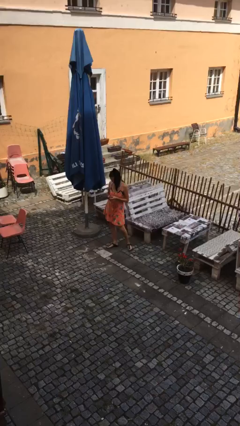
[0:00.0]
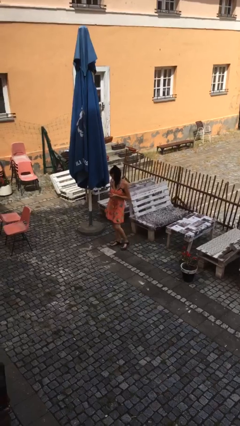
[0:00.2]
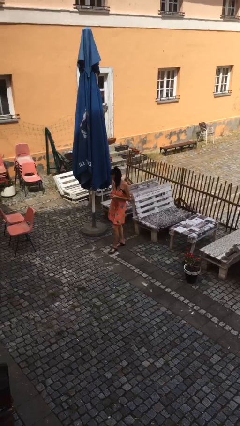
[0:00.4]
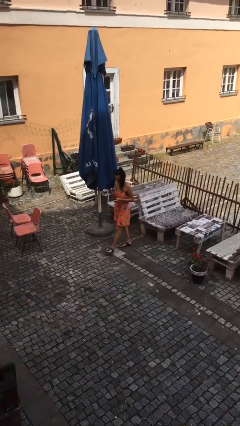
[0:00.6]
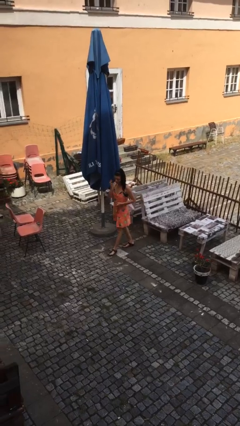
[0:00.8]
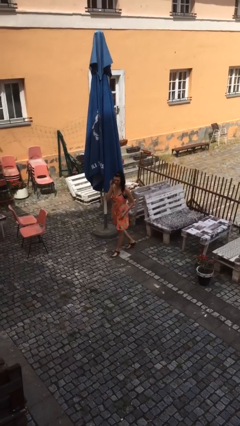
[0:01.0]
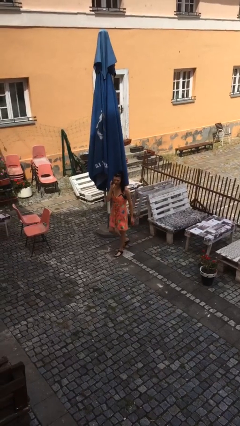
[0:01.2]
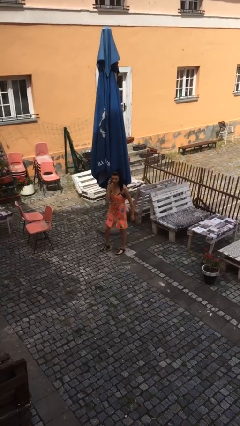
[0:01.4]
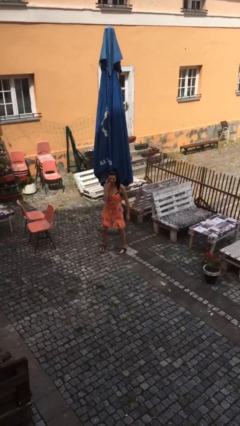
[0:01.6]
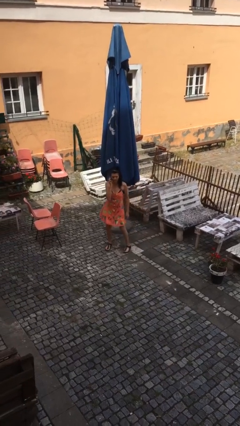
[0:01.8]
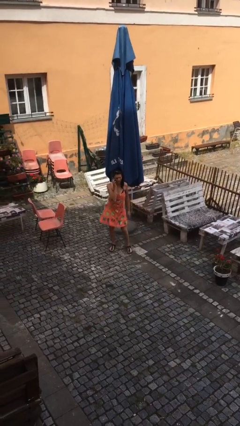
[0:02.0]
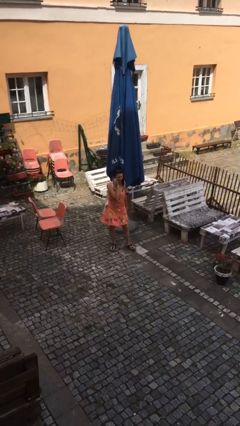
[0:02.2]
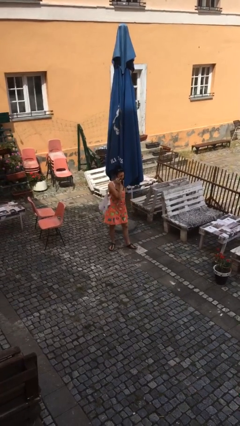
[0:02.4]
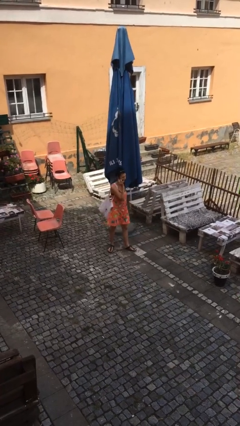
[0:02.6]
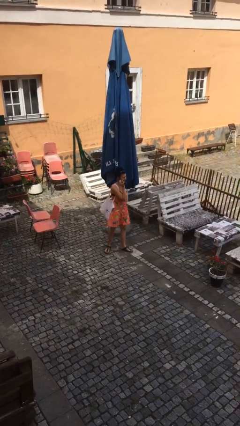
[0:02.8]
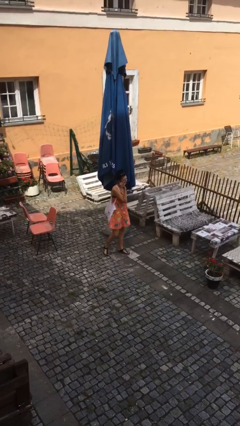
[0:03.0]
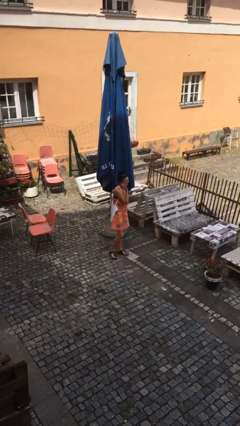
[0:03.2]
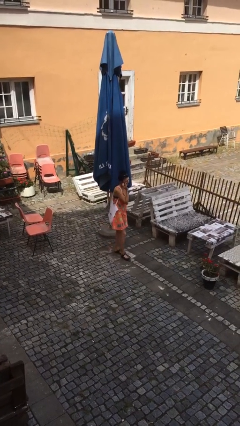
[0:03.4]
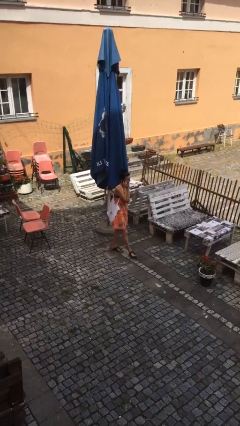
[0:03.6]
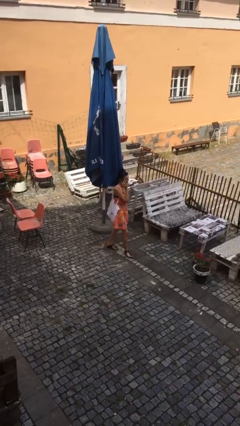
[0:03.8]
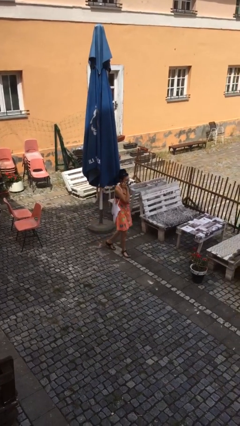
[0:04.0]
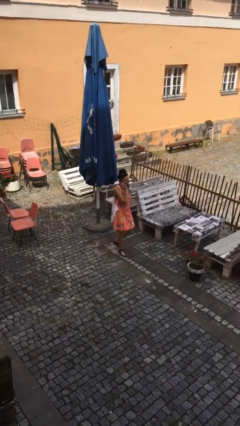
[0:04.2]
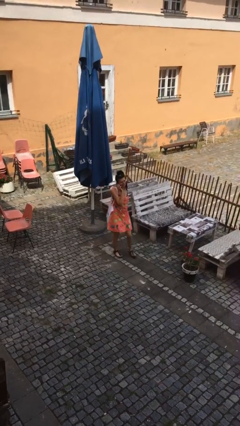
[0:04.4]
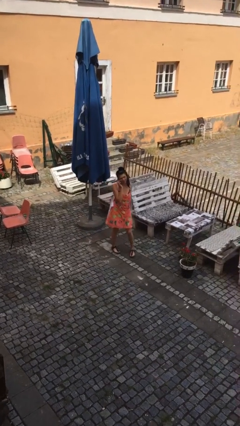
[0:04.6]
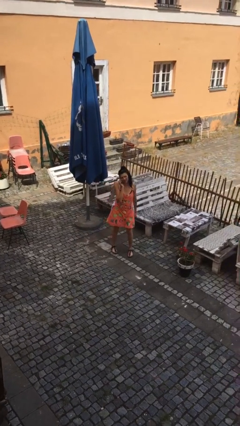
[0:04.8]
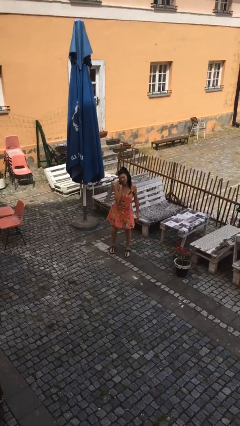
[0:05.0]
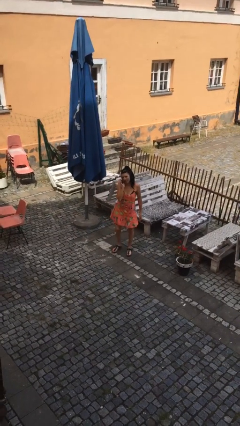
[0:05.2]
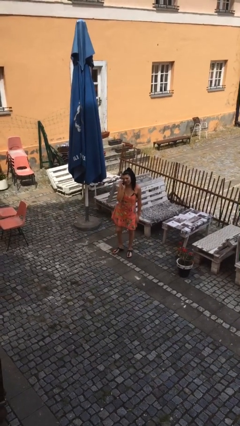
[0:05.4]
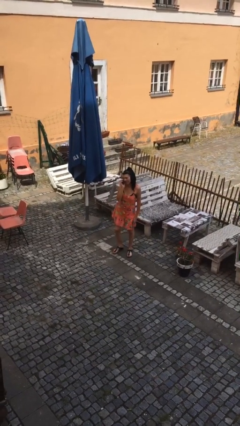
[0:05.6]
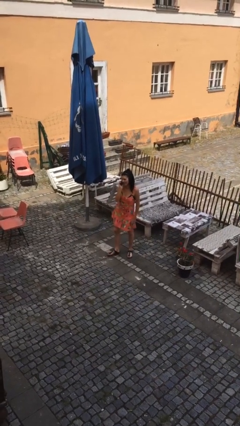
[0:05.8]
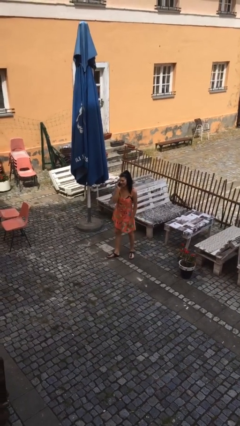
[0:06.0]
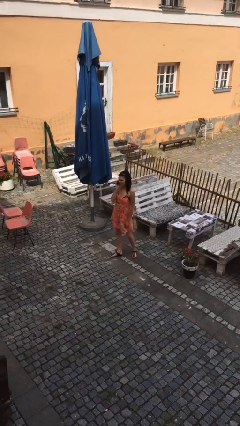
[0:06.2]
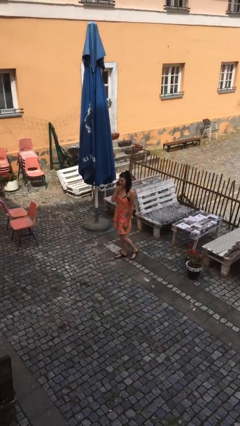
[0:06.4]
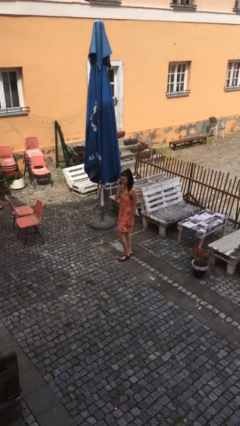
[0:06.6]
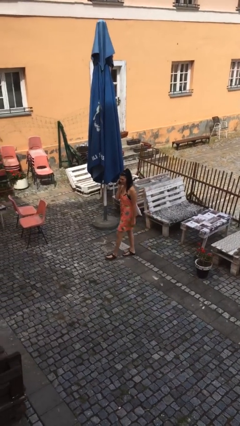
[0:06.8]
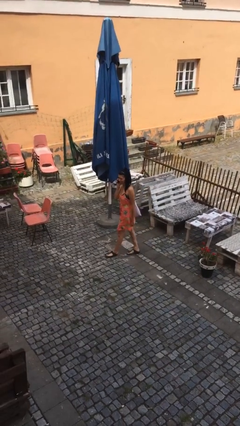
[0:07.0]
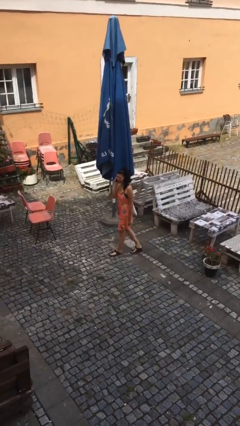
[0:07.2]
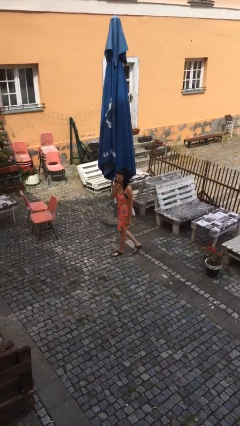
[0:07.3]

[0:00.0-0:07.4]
person talks on phone

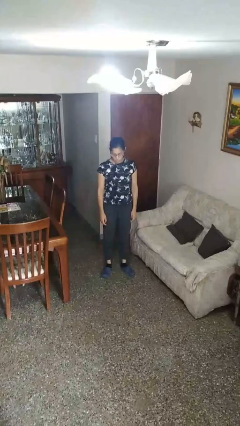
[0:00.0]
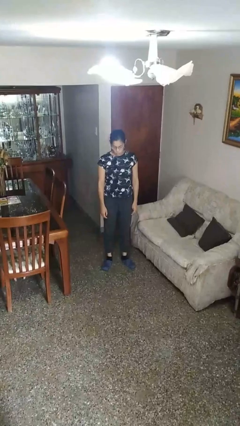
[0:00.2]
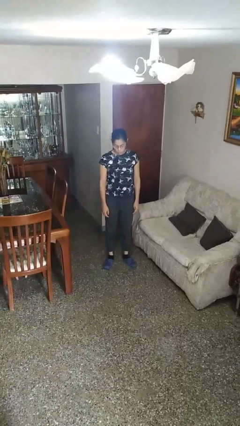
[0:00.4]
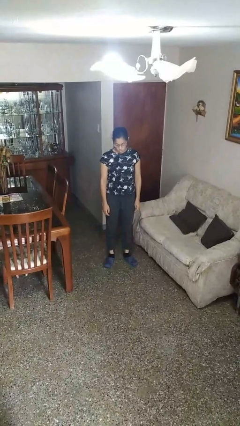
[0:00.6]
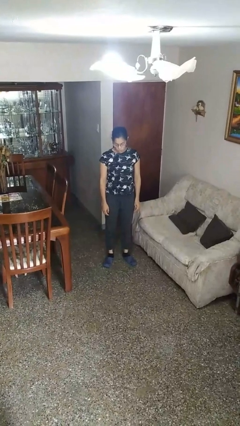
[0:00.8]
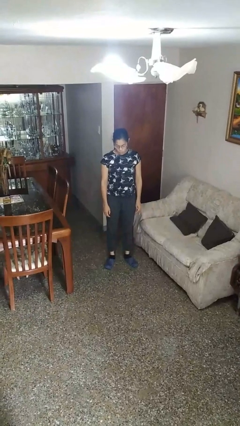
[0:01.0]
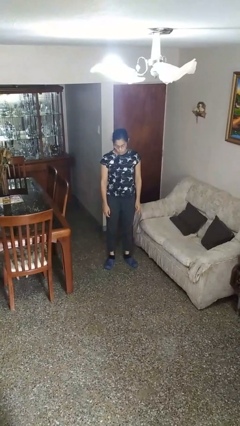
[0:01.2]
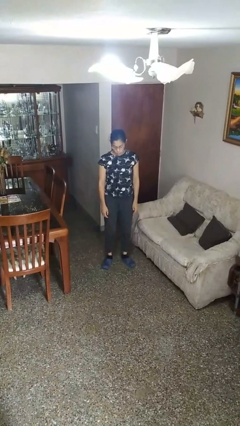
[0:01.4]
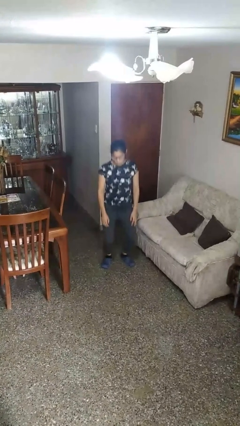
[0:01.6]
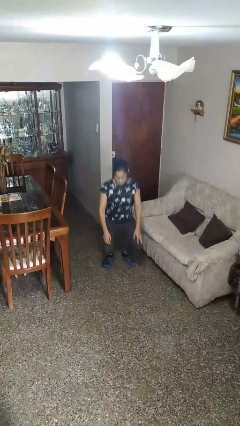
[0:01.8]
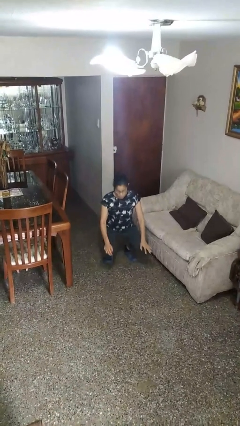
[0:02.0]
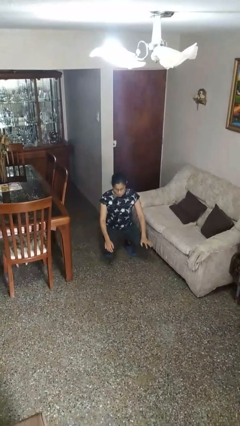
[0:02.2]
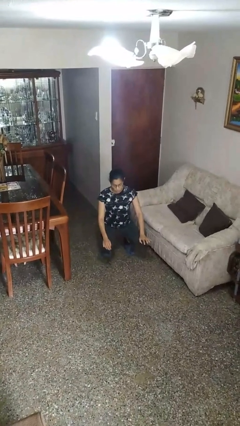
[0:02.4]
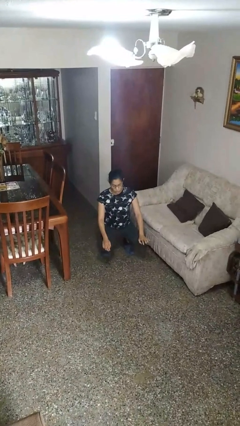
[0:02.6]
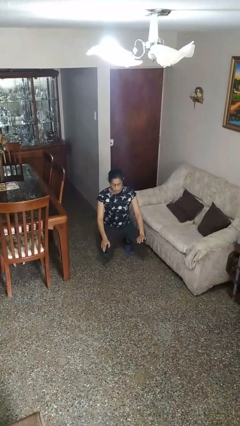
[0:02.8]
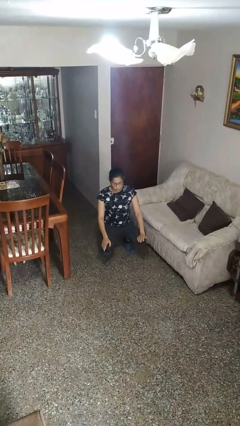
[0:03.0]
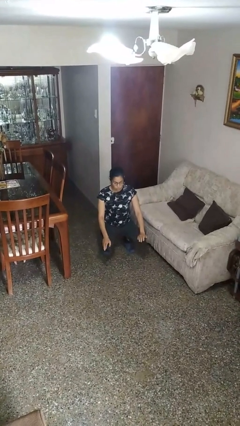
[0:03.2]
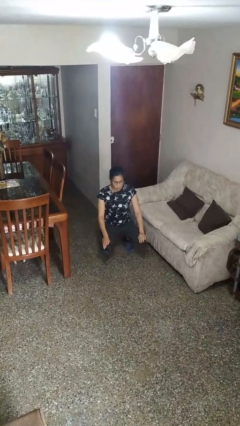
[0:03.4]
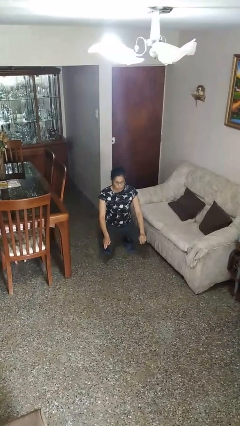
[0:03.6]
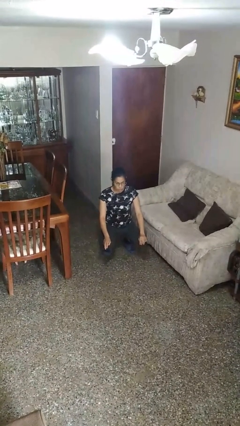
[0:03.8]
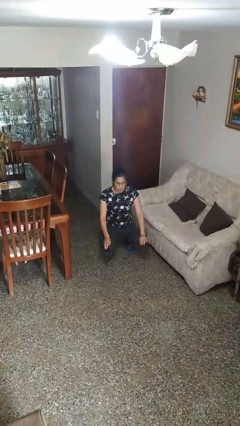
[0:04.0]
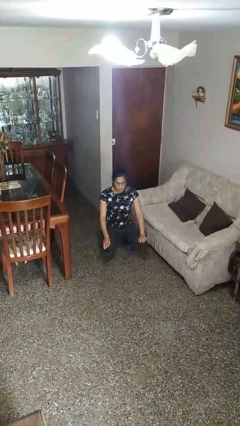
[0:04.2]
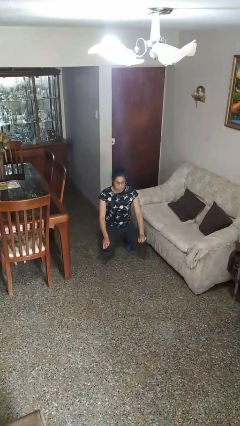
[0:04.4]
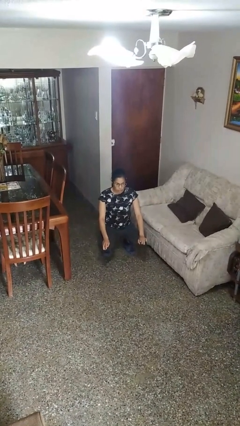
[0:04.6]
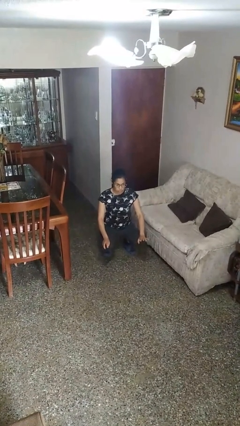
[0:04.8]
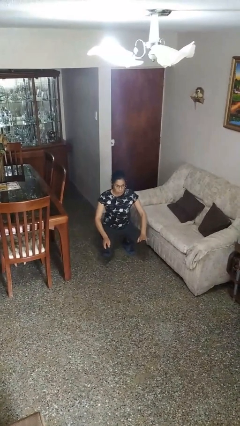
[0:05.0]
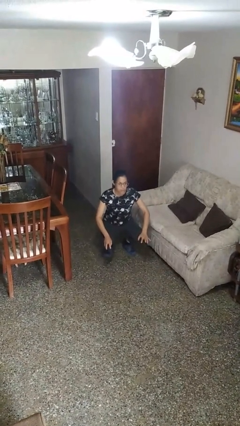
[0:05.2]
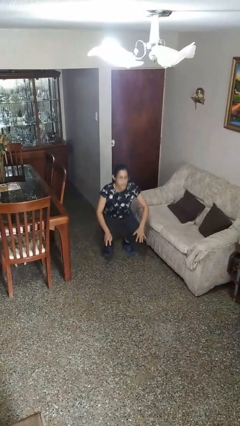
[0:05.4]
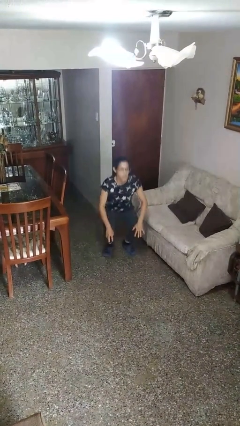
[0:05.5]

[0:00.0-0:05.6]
person squats

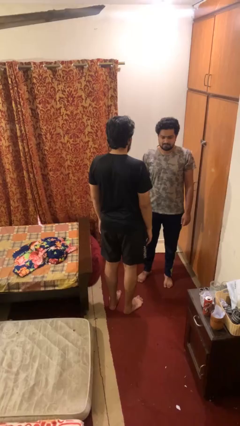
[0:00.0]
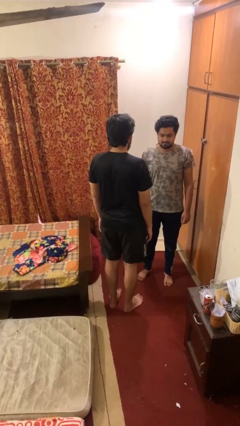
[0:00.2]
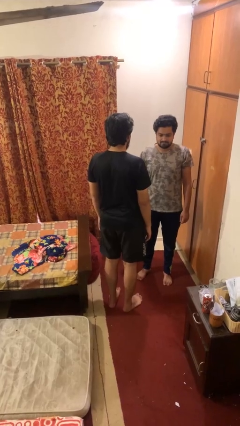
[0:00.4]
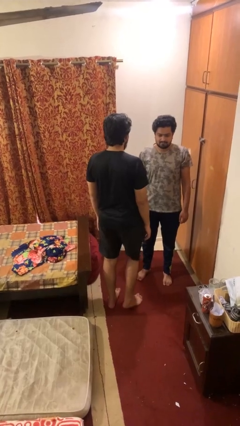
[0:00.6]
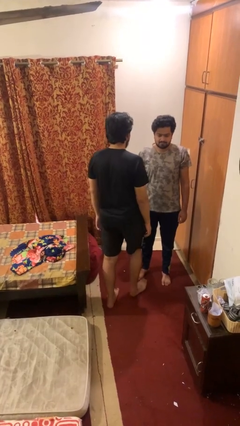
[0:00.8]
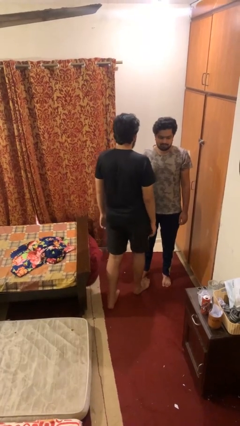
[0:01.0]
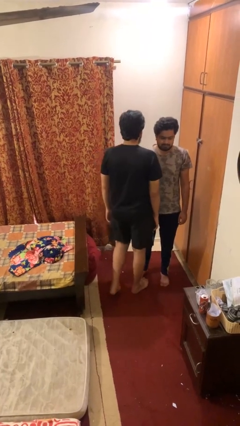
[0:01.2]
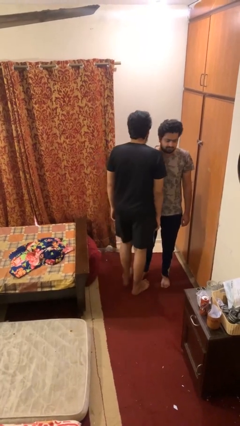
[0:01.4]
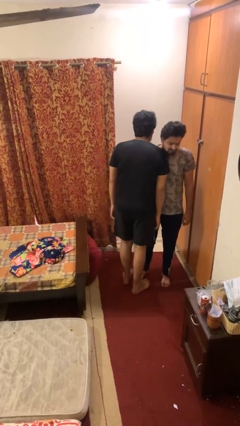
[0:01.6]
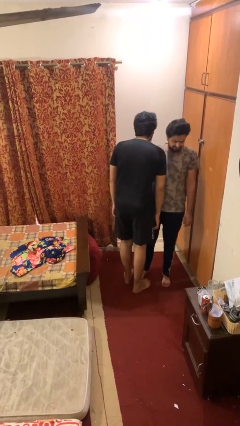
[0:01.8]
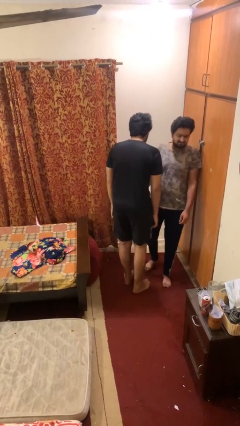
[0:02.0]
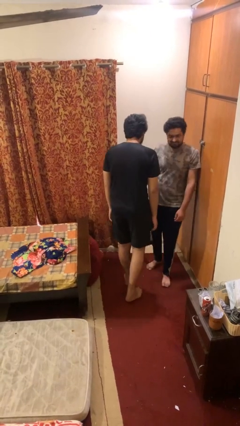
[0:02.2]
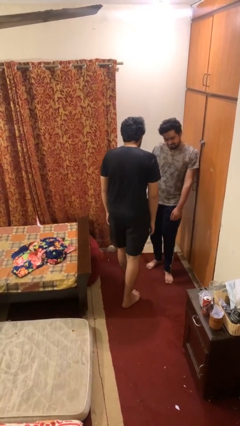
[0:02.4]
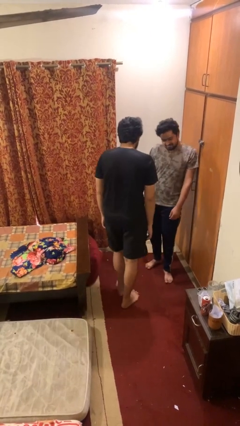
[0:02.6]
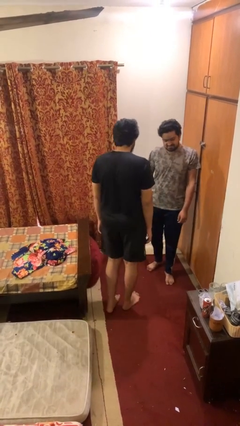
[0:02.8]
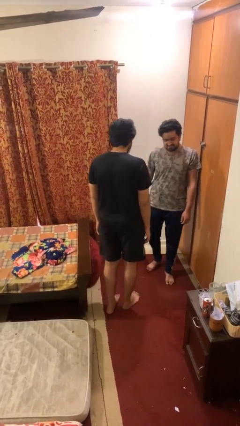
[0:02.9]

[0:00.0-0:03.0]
person bumps into person

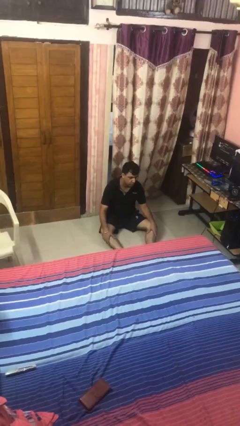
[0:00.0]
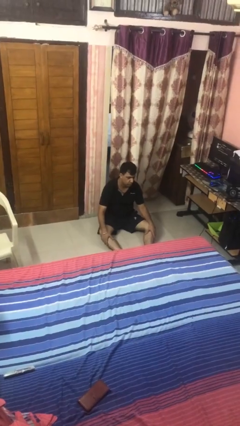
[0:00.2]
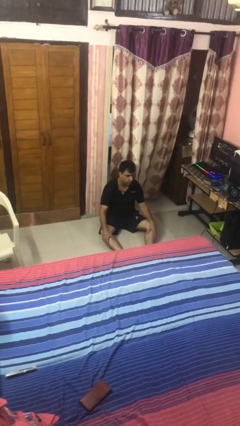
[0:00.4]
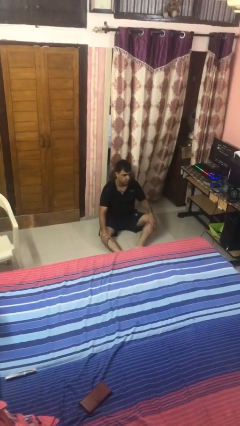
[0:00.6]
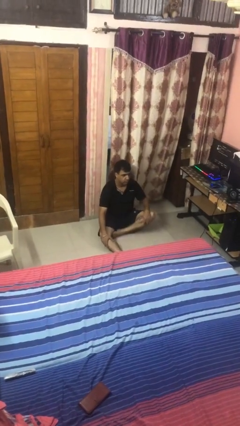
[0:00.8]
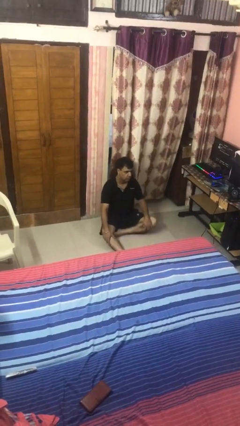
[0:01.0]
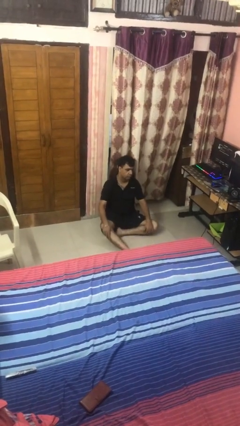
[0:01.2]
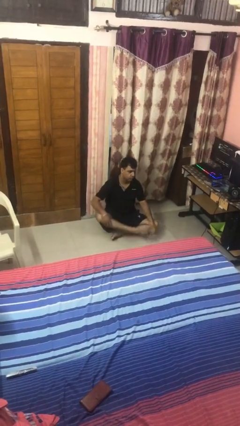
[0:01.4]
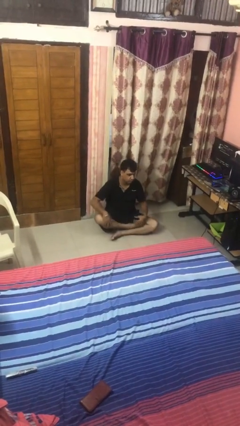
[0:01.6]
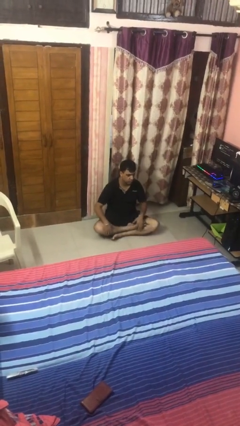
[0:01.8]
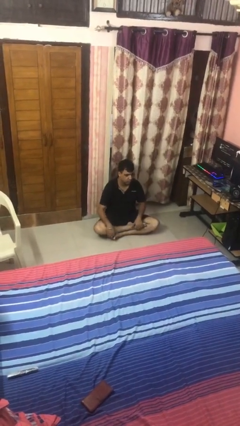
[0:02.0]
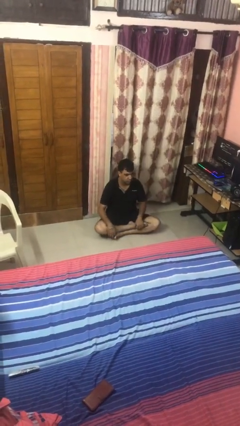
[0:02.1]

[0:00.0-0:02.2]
person crosses legs
